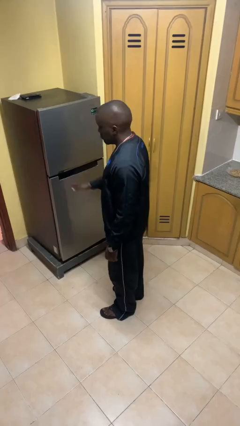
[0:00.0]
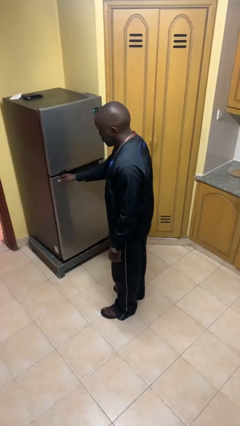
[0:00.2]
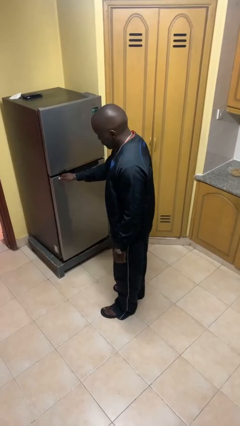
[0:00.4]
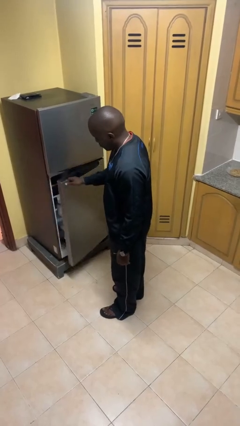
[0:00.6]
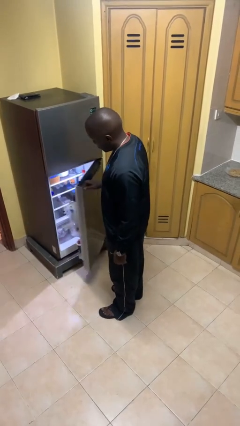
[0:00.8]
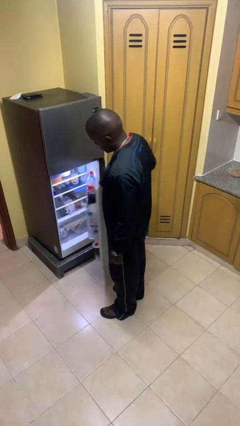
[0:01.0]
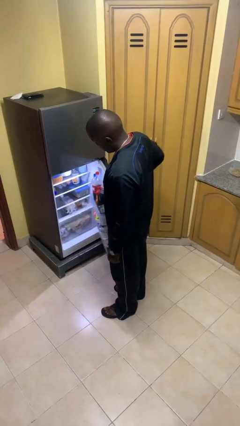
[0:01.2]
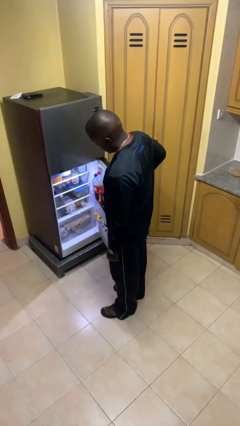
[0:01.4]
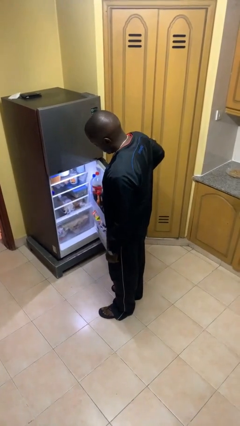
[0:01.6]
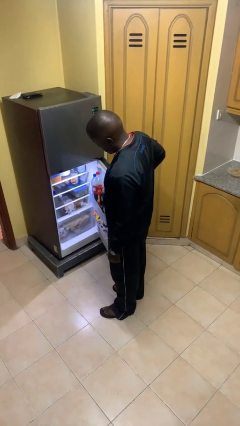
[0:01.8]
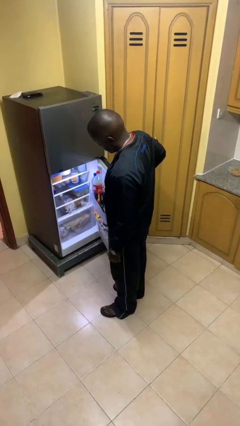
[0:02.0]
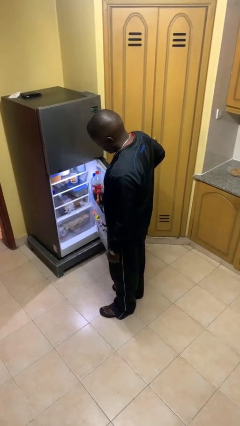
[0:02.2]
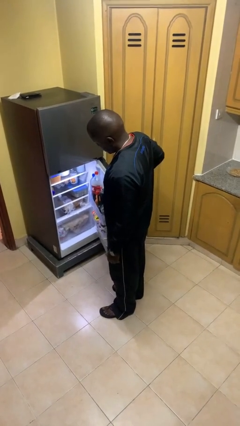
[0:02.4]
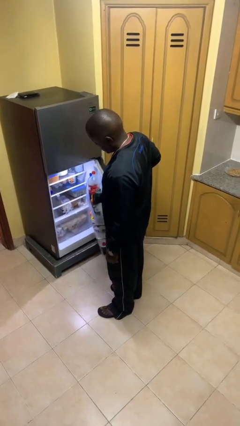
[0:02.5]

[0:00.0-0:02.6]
person opens refrigerator

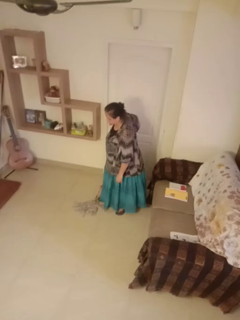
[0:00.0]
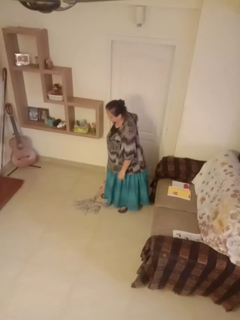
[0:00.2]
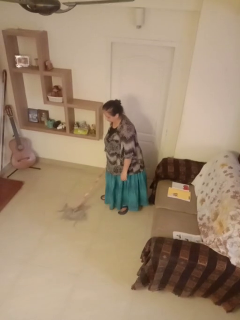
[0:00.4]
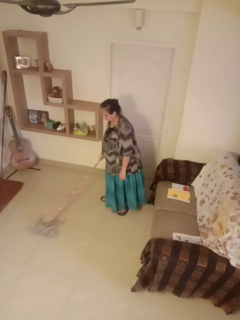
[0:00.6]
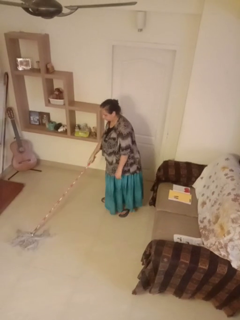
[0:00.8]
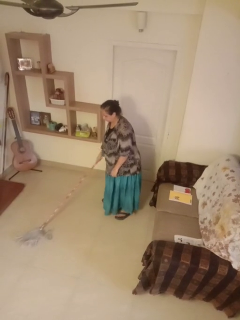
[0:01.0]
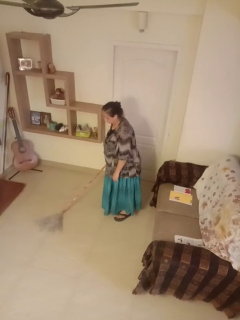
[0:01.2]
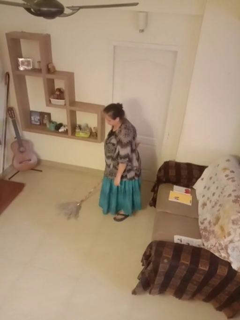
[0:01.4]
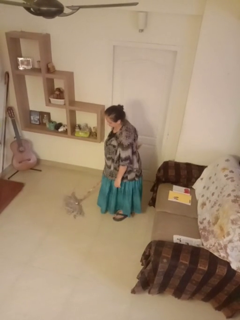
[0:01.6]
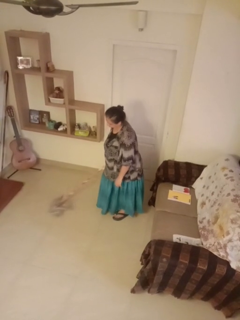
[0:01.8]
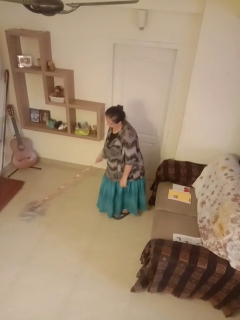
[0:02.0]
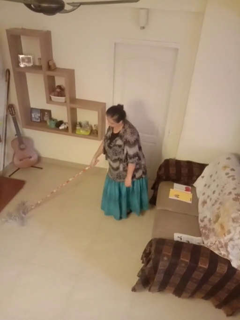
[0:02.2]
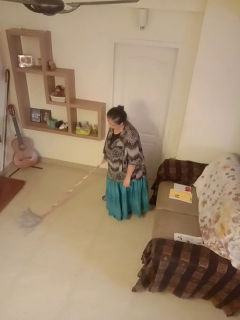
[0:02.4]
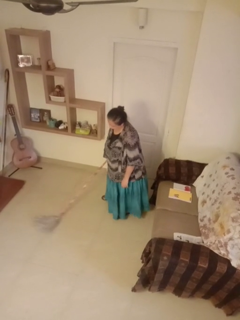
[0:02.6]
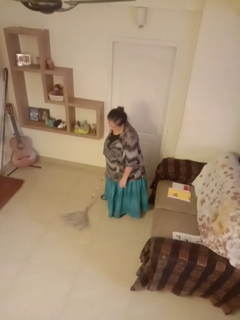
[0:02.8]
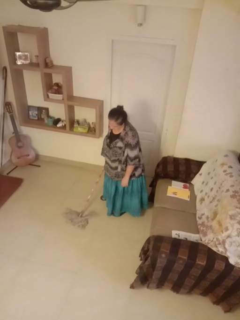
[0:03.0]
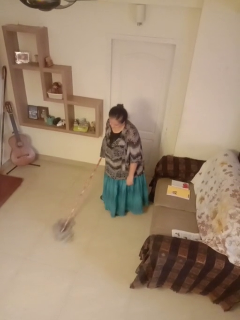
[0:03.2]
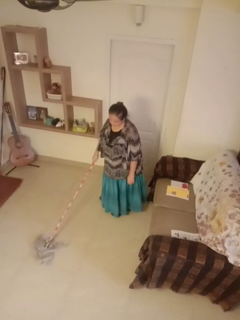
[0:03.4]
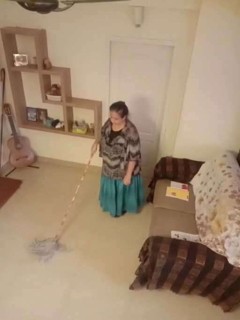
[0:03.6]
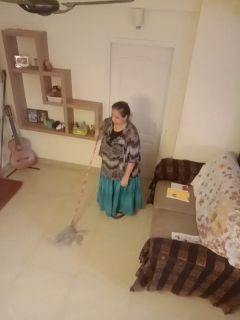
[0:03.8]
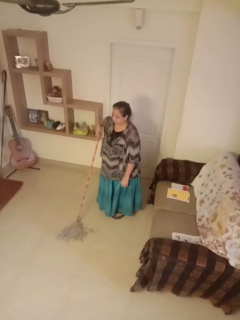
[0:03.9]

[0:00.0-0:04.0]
person mops

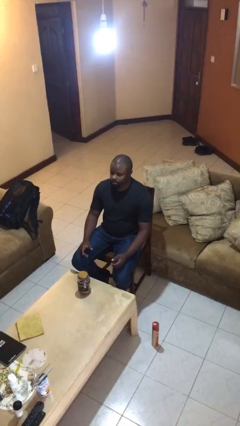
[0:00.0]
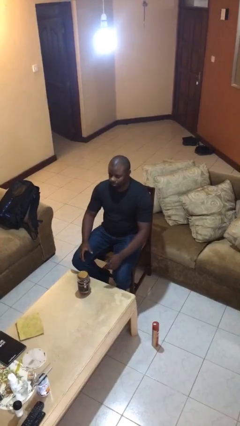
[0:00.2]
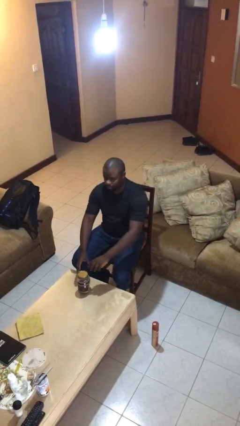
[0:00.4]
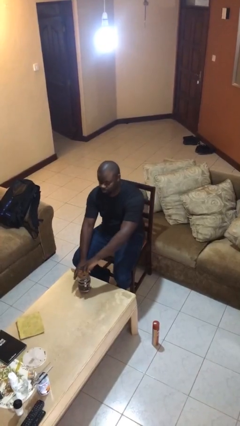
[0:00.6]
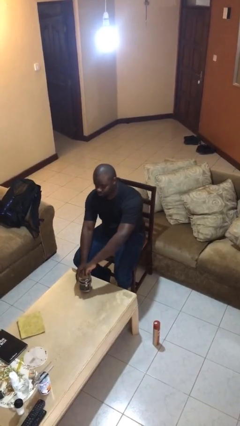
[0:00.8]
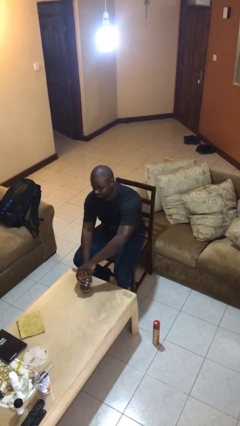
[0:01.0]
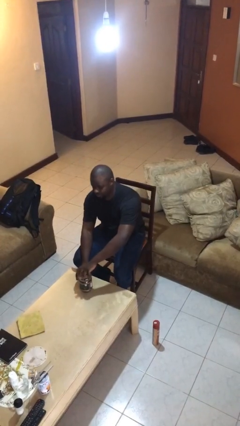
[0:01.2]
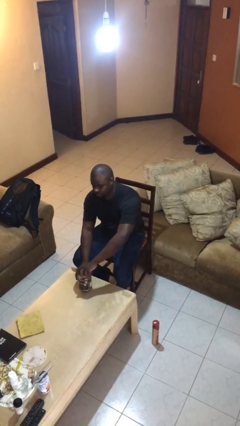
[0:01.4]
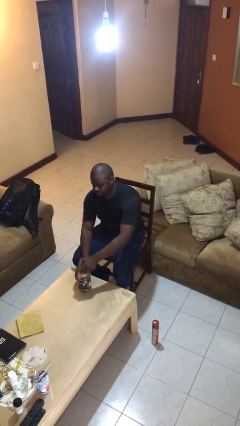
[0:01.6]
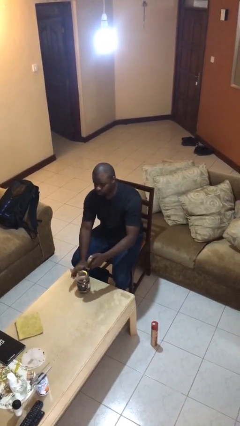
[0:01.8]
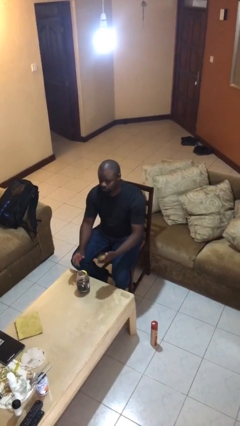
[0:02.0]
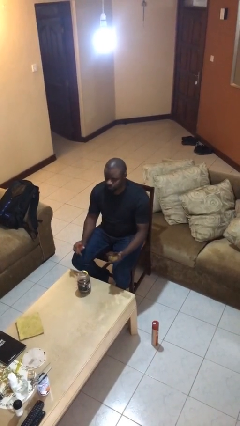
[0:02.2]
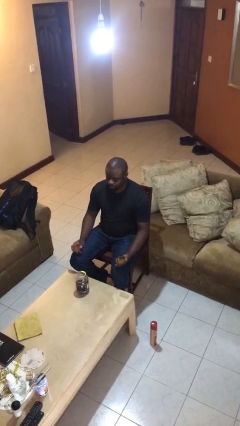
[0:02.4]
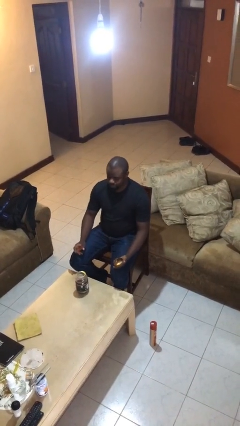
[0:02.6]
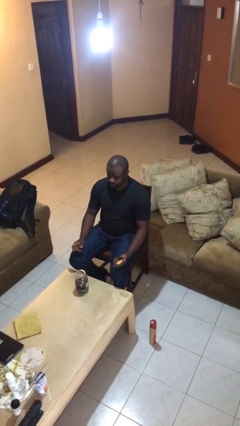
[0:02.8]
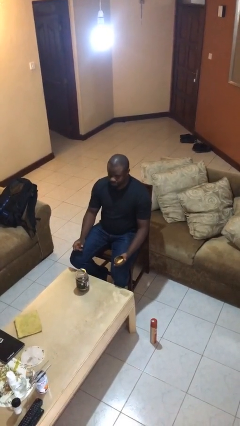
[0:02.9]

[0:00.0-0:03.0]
person opens jar

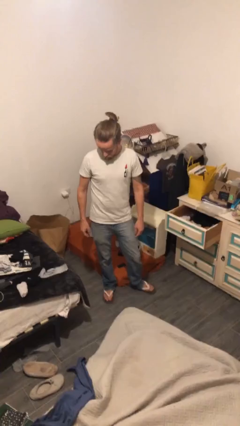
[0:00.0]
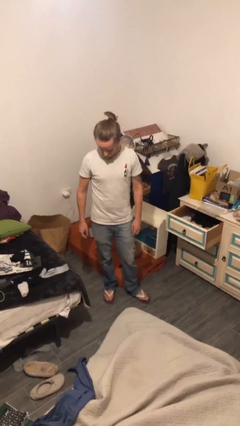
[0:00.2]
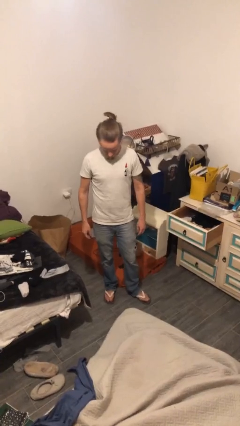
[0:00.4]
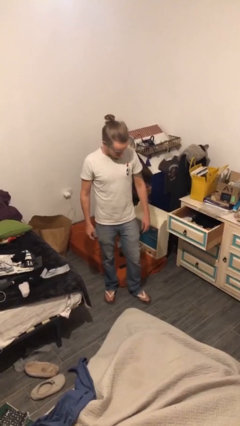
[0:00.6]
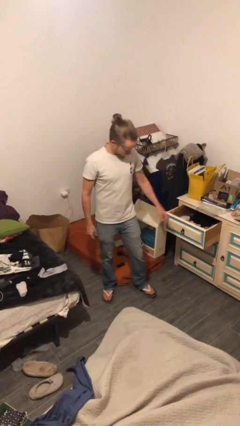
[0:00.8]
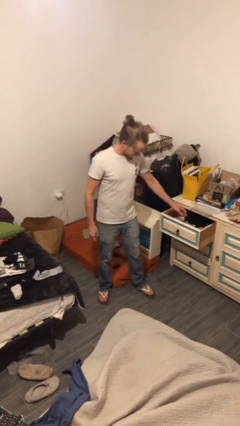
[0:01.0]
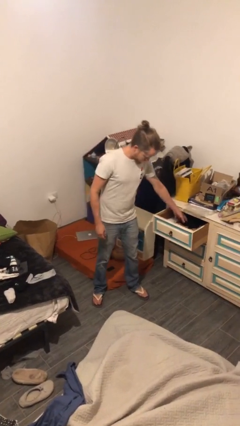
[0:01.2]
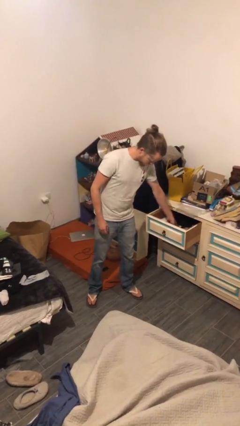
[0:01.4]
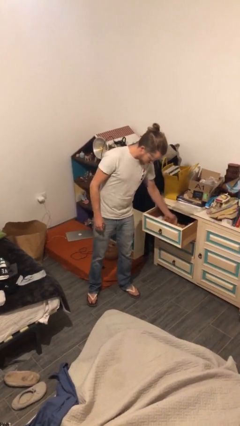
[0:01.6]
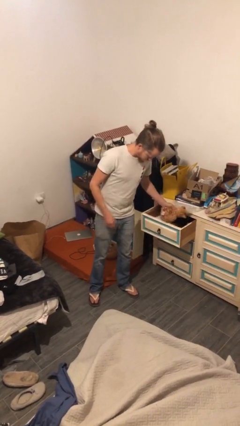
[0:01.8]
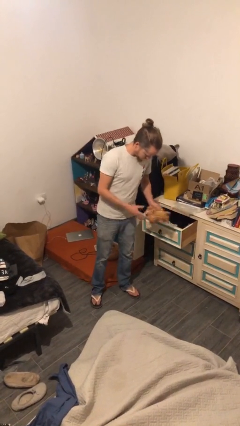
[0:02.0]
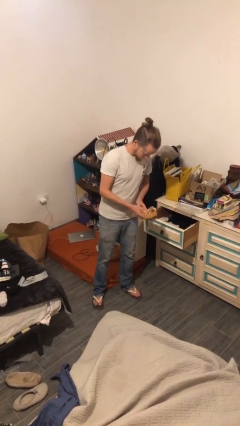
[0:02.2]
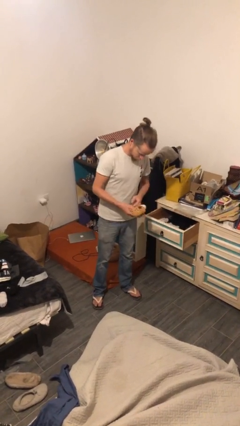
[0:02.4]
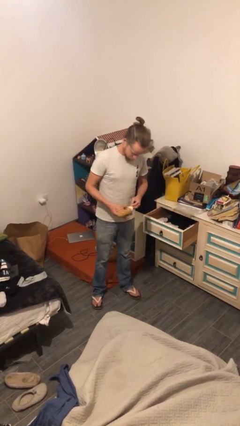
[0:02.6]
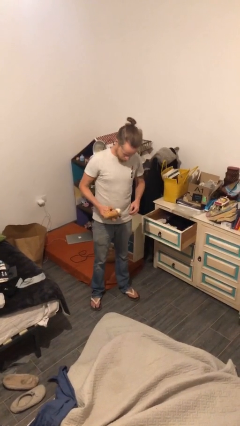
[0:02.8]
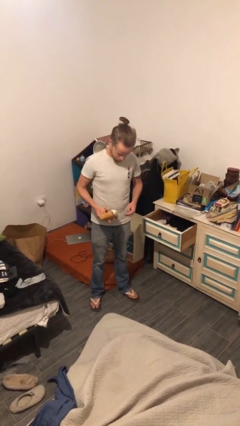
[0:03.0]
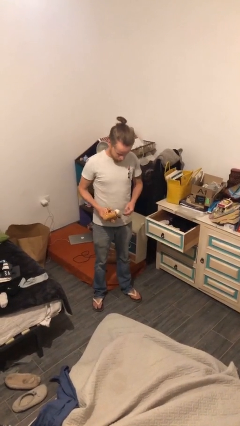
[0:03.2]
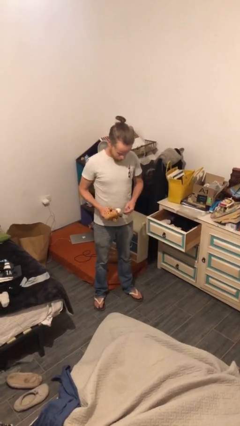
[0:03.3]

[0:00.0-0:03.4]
person picks up object from cabinet

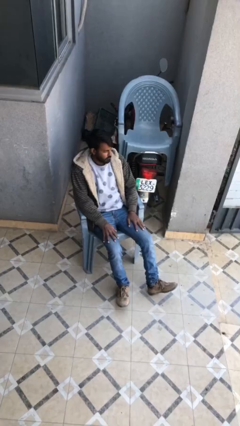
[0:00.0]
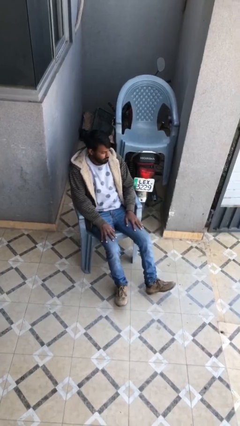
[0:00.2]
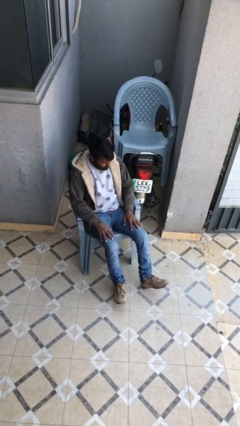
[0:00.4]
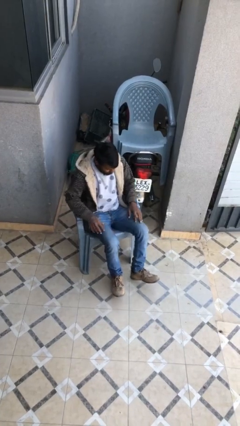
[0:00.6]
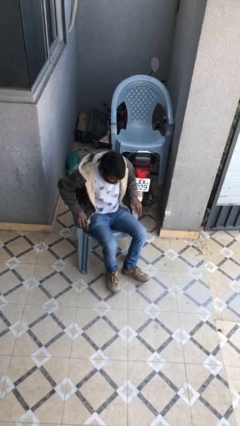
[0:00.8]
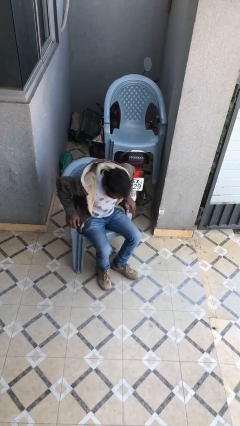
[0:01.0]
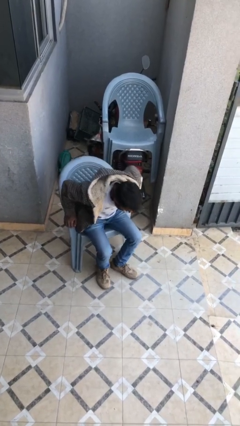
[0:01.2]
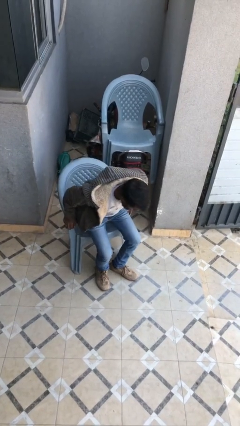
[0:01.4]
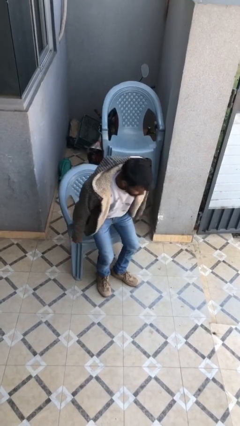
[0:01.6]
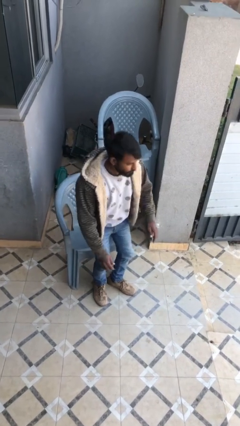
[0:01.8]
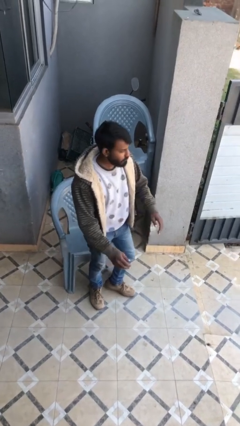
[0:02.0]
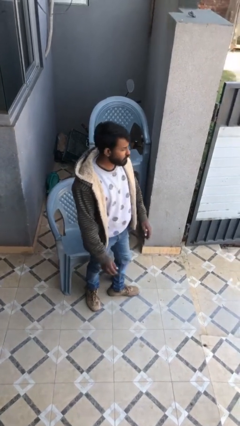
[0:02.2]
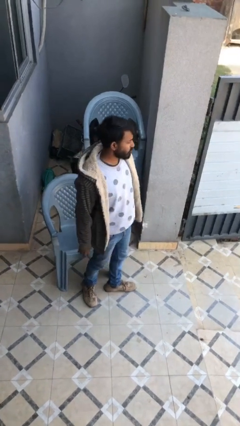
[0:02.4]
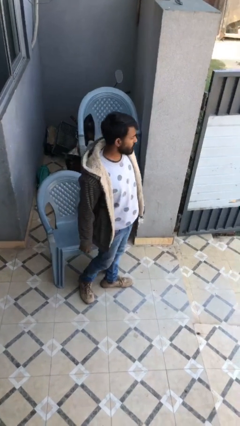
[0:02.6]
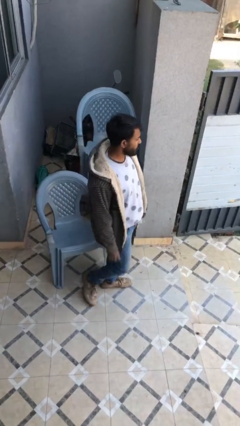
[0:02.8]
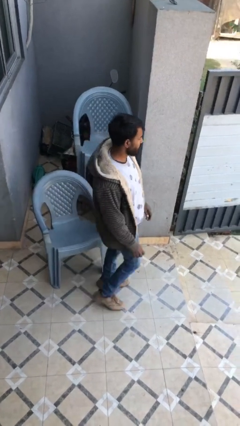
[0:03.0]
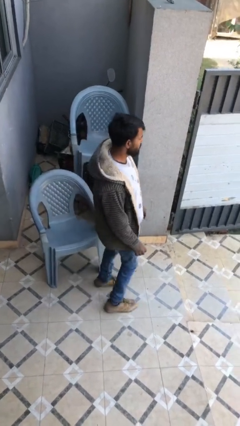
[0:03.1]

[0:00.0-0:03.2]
person stands up

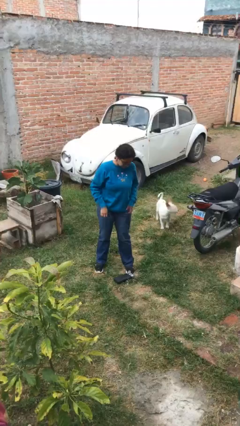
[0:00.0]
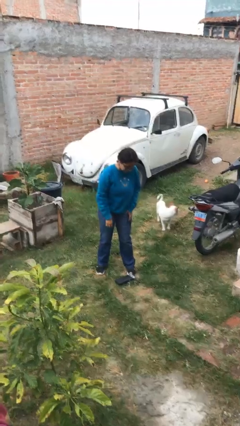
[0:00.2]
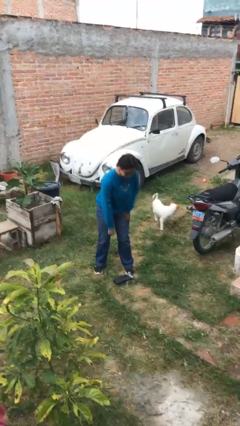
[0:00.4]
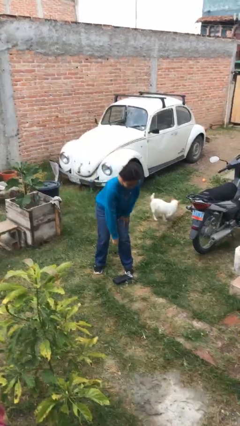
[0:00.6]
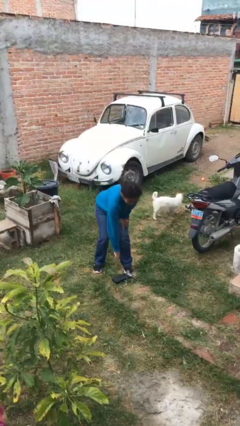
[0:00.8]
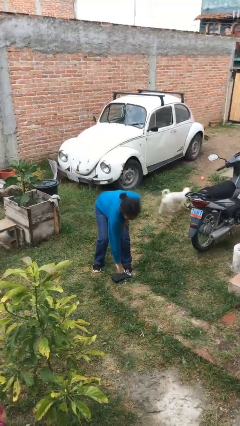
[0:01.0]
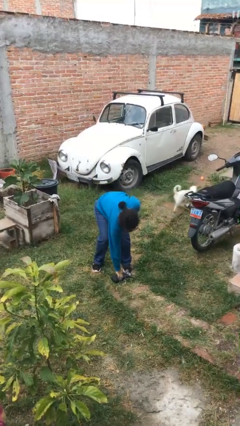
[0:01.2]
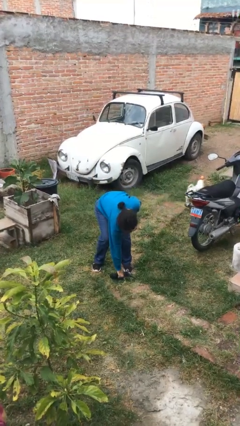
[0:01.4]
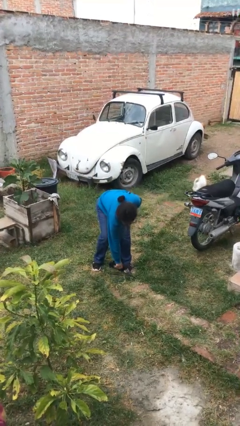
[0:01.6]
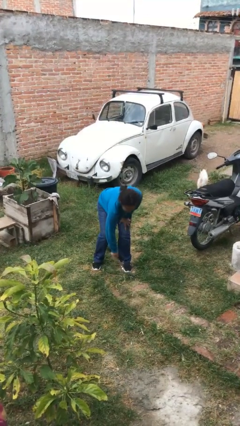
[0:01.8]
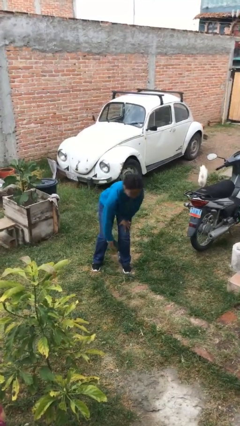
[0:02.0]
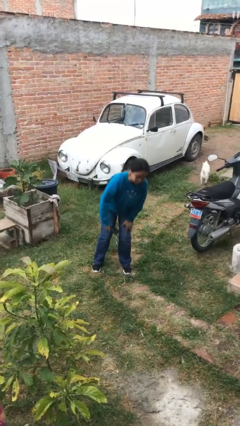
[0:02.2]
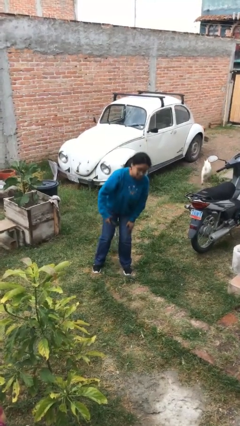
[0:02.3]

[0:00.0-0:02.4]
person picks up object from floor
